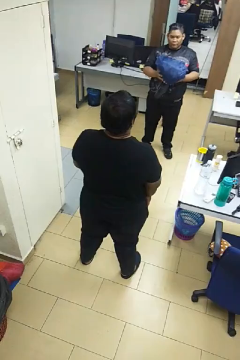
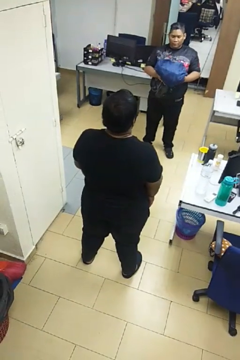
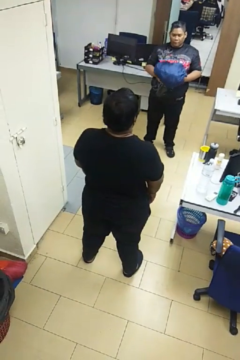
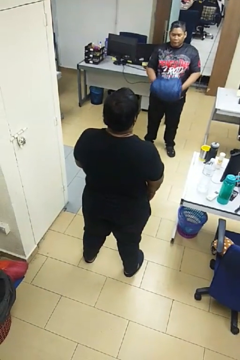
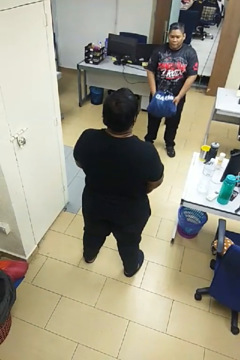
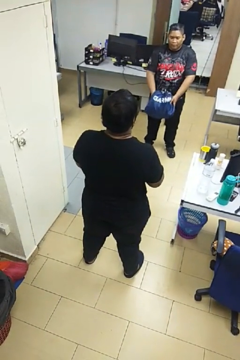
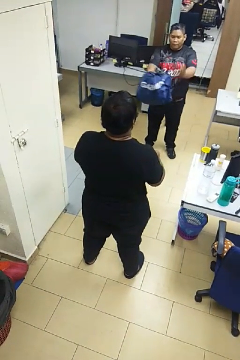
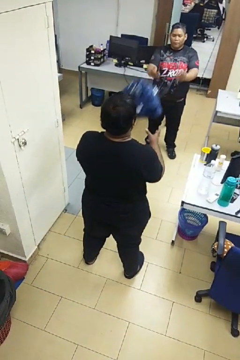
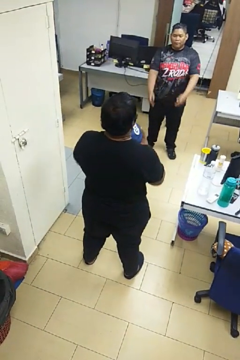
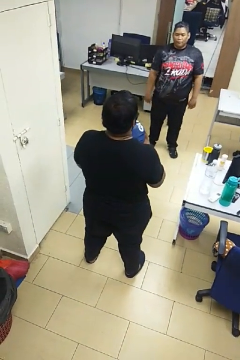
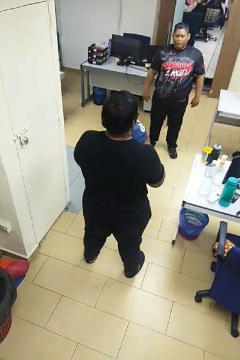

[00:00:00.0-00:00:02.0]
person catches object from person

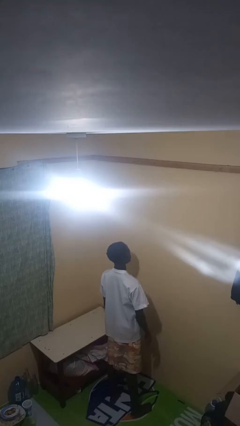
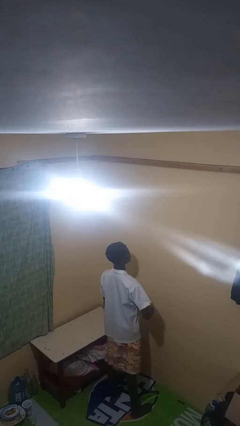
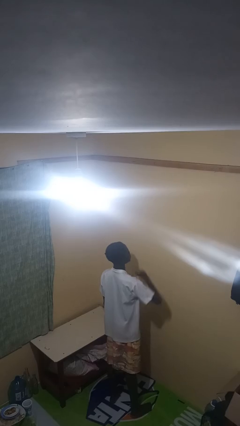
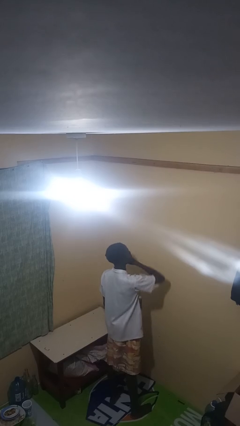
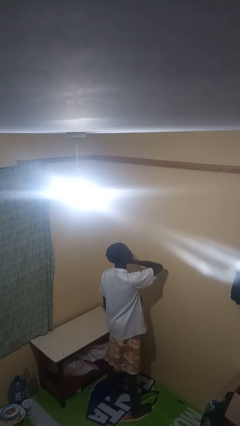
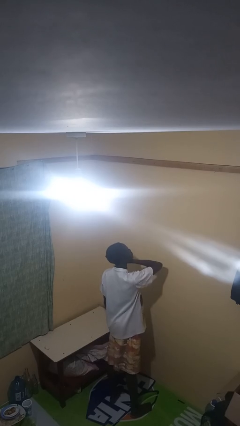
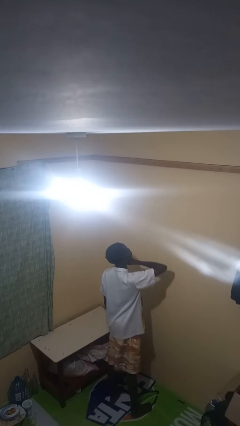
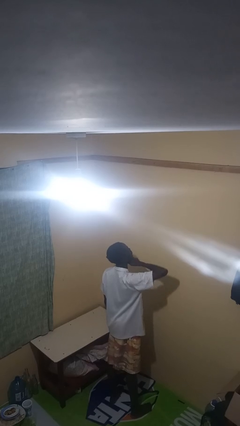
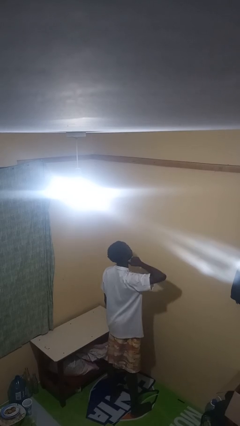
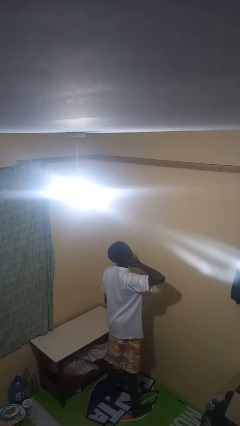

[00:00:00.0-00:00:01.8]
person gestures cut

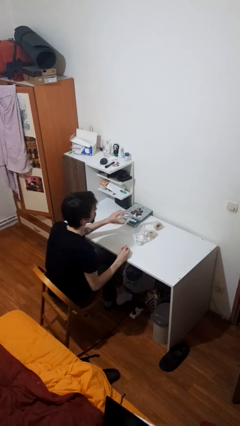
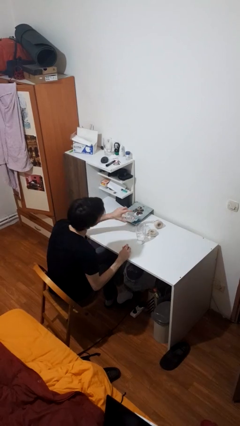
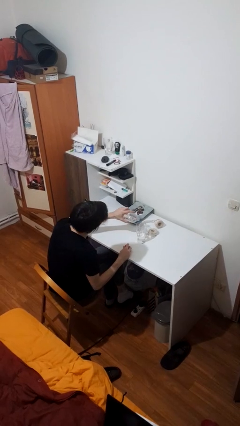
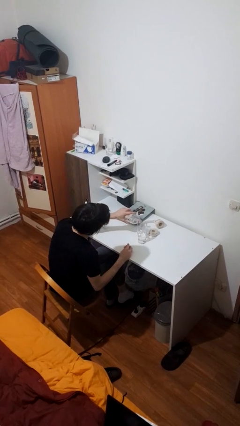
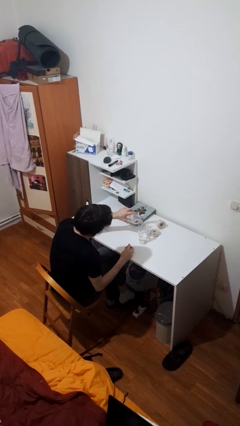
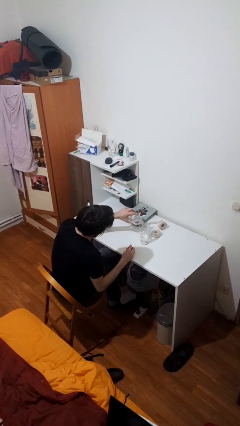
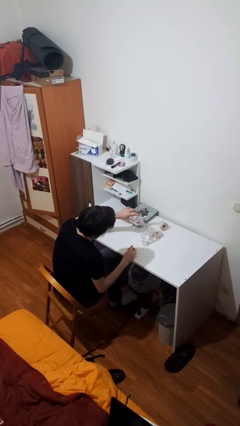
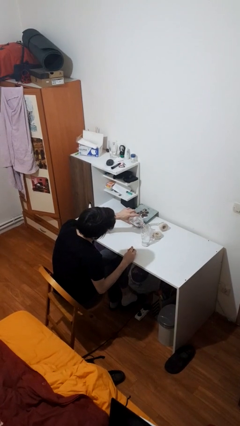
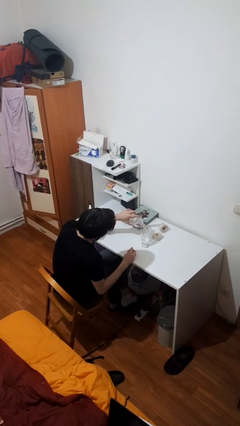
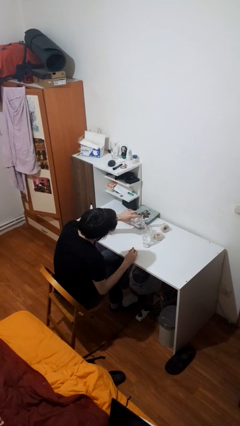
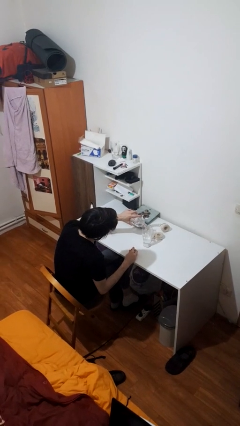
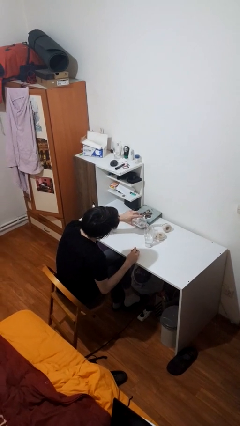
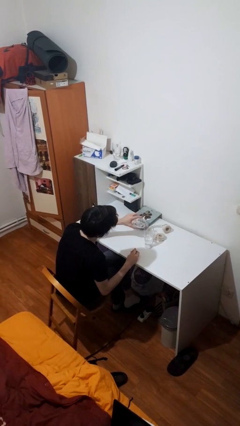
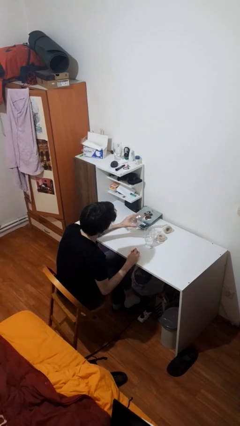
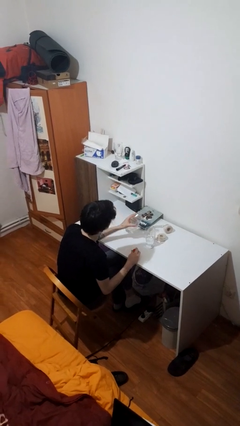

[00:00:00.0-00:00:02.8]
person pours liquid into cup

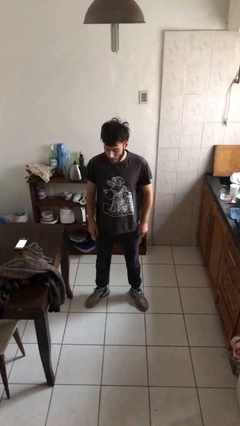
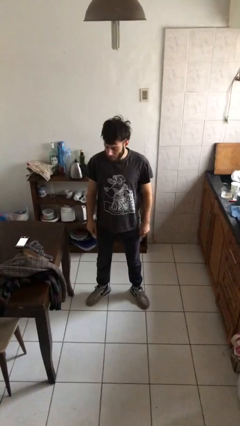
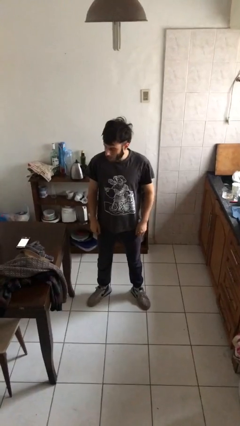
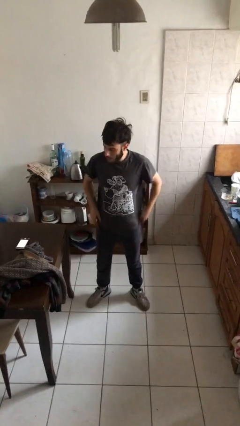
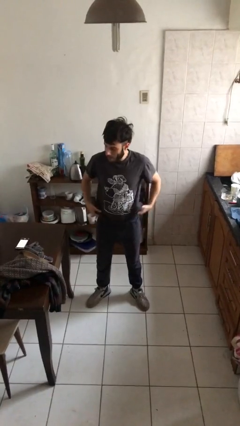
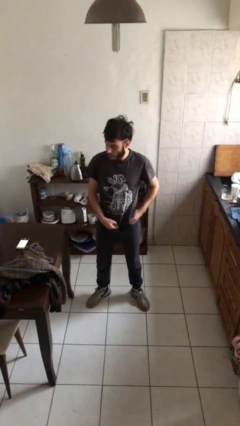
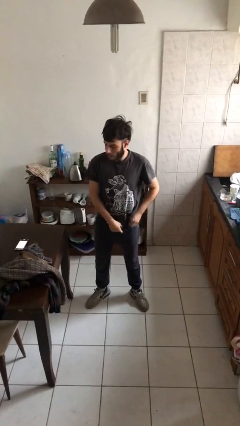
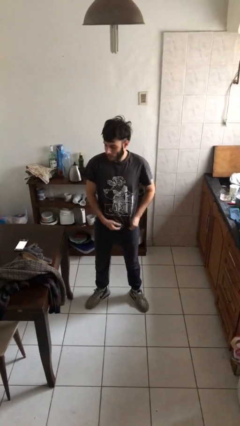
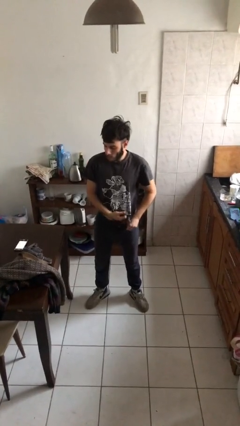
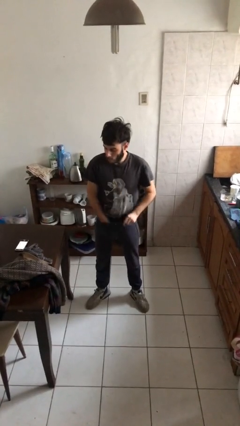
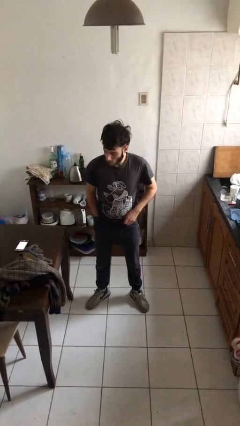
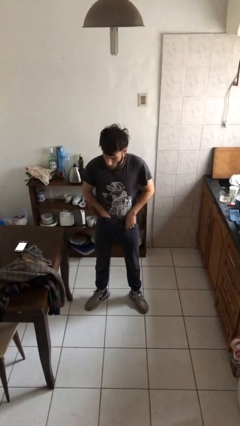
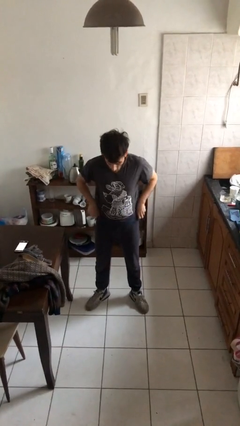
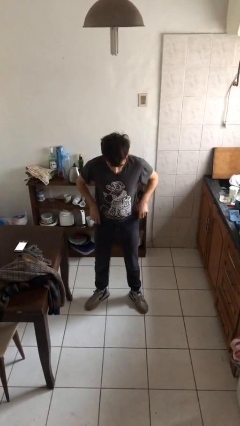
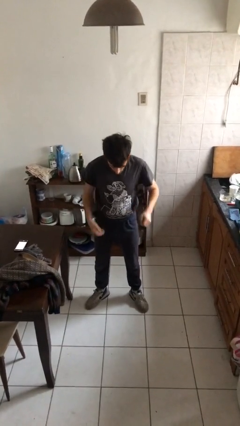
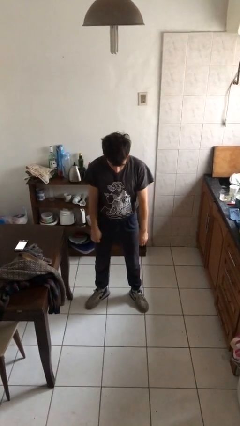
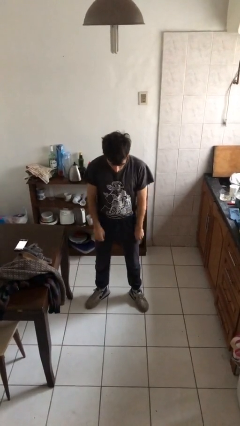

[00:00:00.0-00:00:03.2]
person tucks in shirt

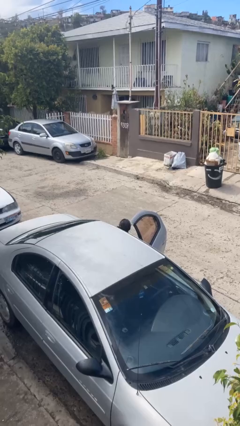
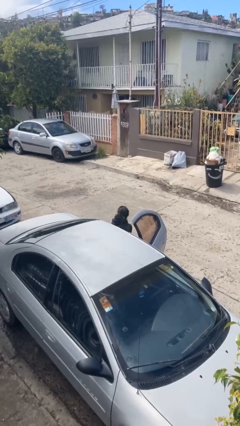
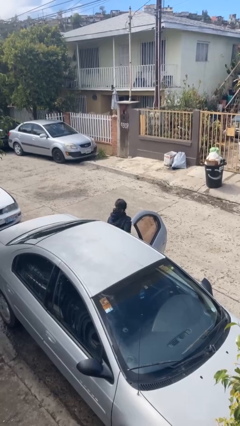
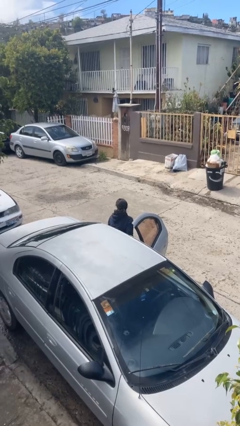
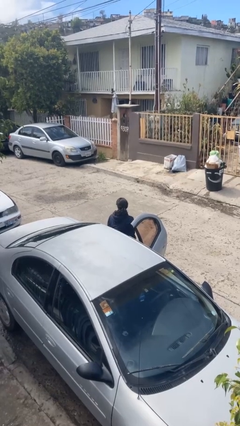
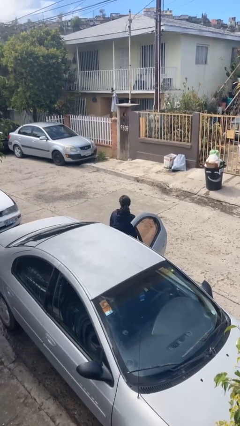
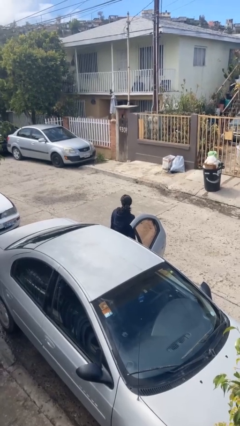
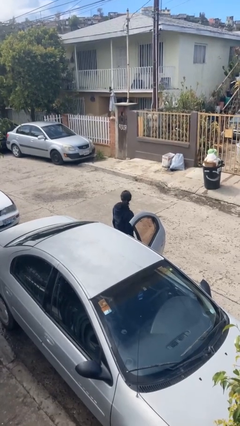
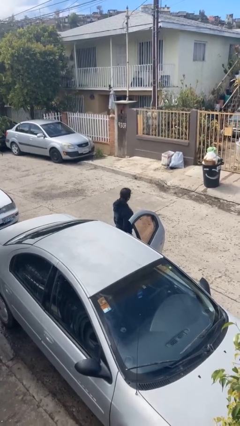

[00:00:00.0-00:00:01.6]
person exits car

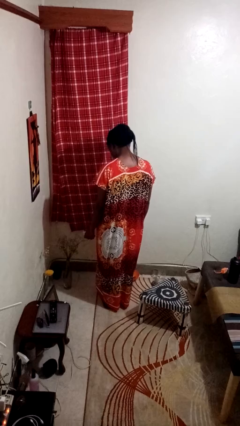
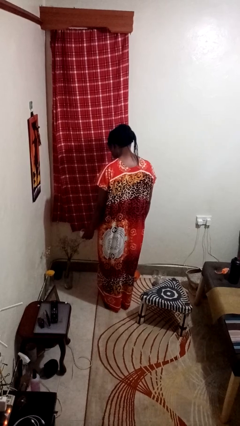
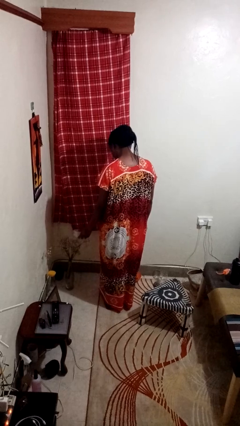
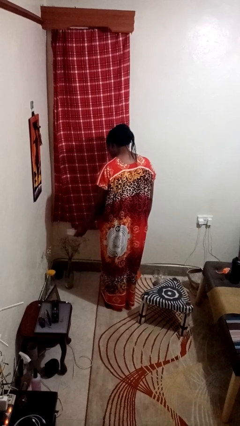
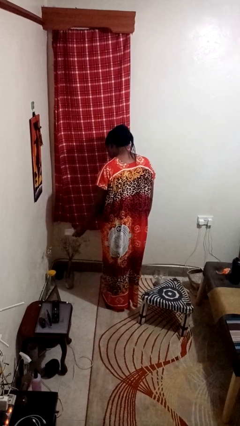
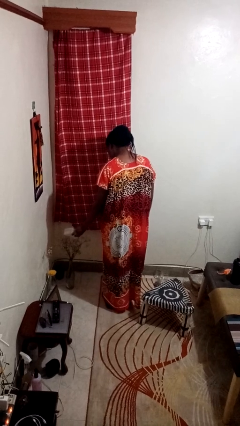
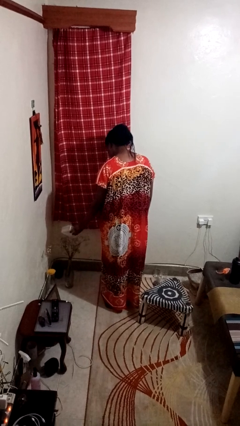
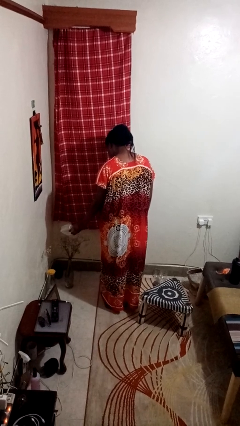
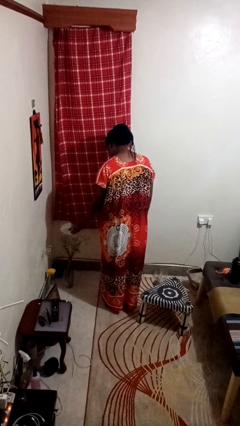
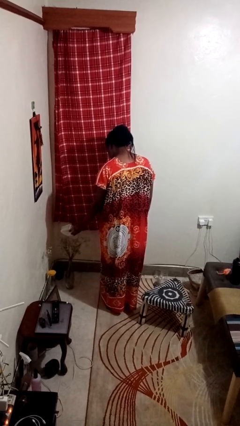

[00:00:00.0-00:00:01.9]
person waters houseplant

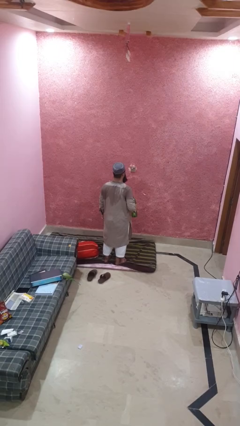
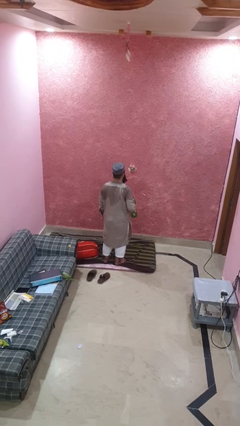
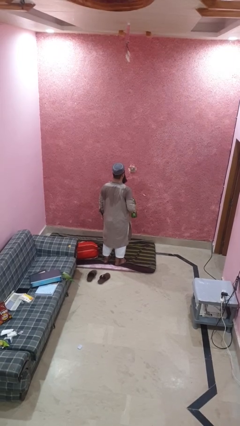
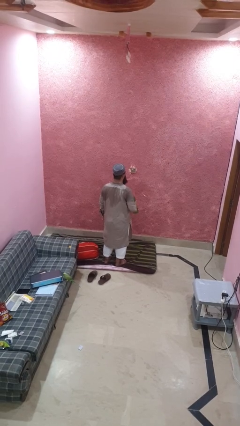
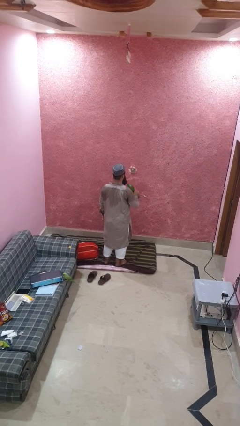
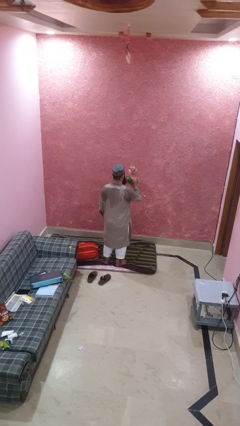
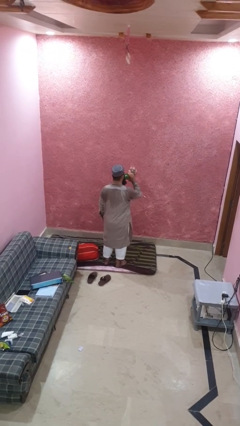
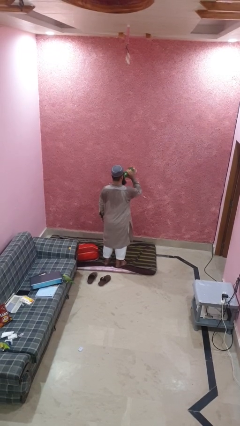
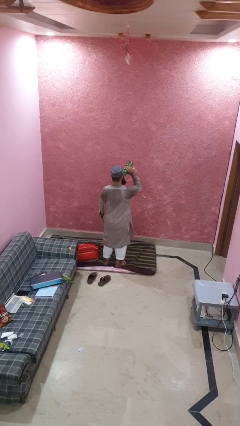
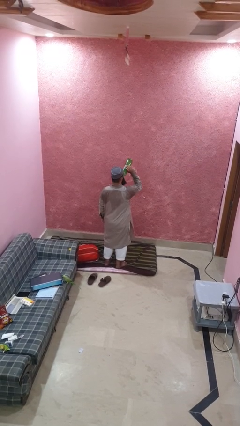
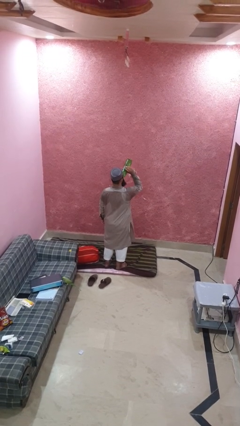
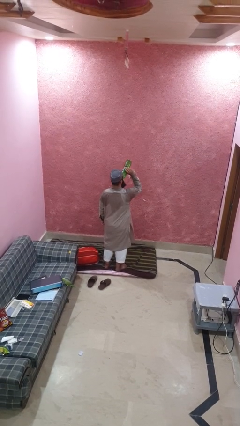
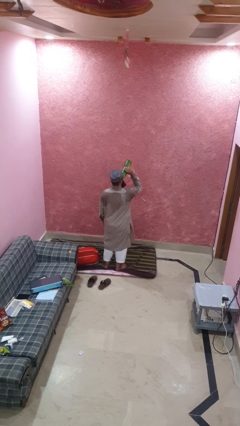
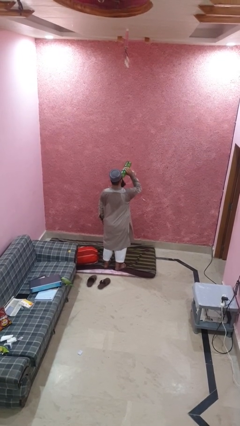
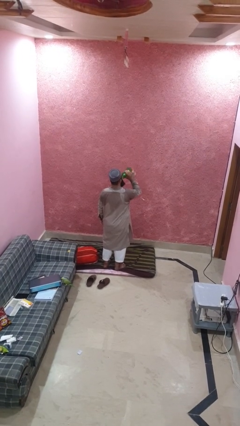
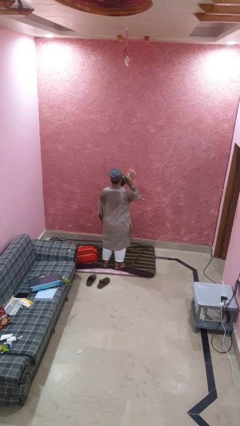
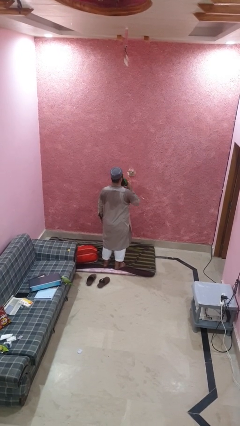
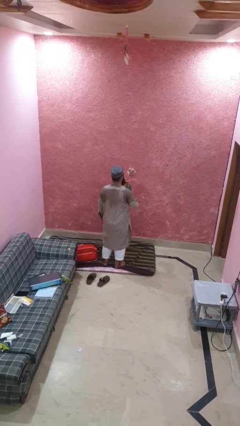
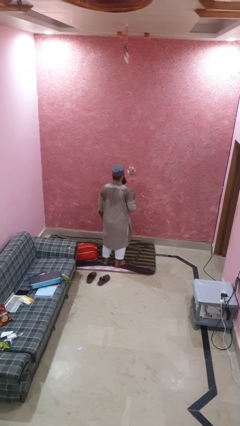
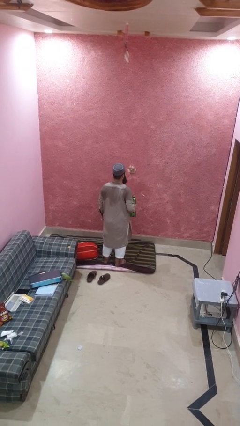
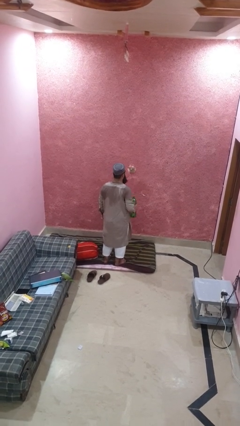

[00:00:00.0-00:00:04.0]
person drinks from bottle

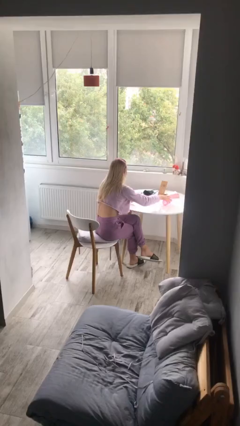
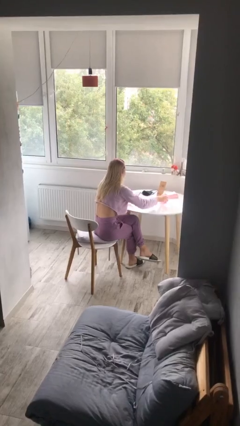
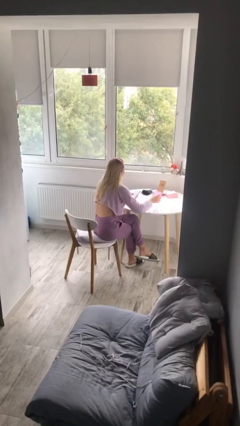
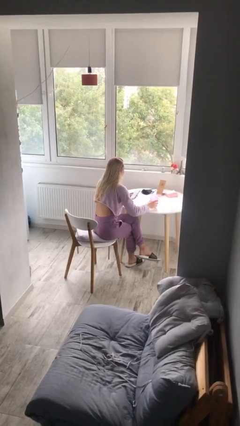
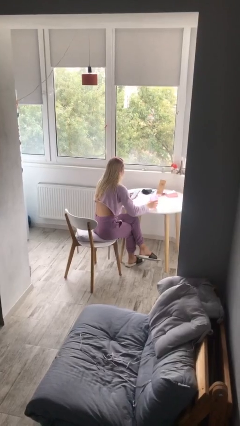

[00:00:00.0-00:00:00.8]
person sets upright glass
